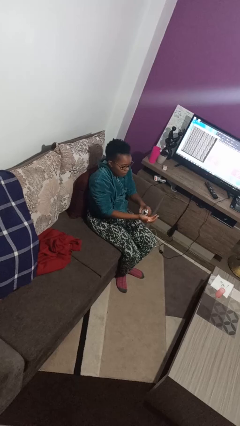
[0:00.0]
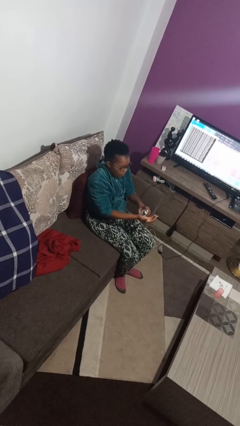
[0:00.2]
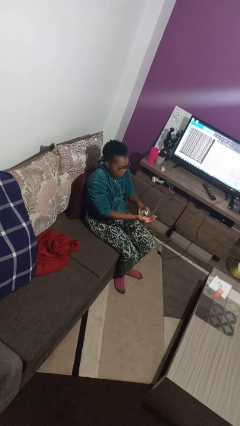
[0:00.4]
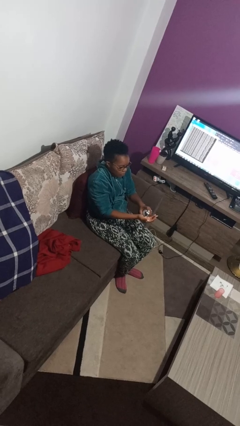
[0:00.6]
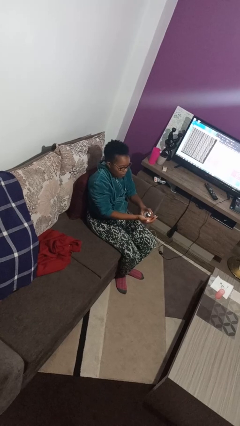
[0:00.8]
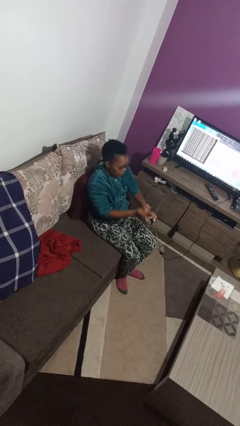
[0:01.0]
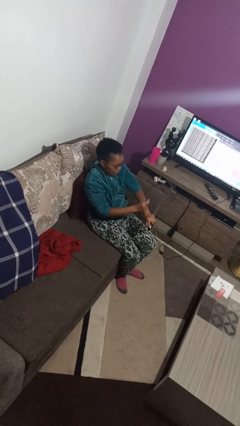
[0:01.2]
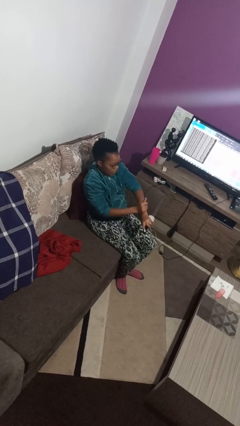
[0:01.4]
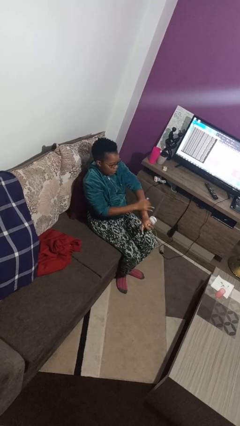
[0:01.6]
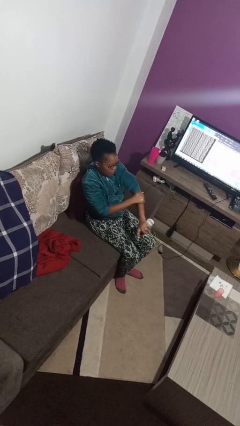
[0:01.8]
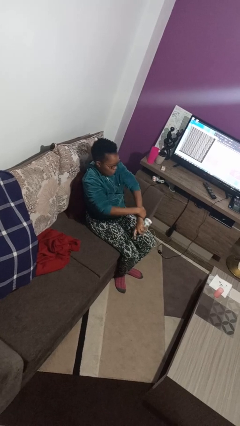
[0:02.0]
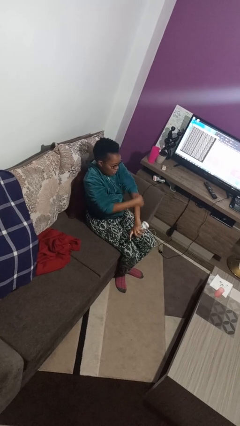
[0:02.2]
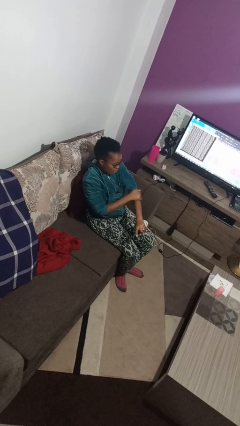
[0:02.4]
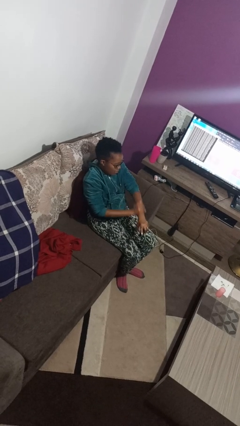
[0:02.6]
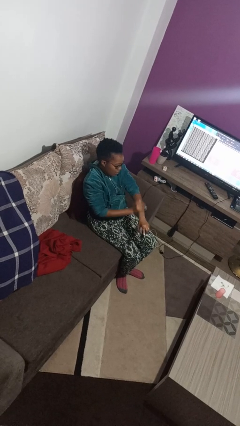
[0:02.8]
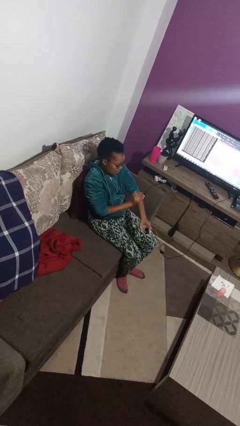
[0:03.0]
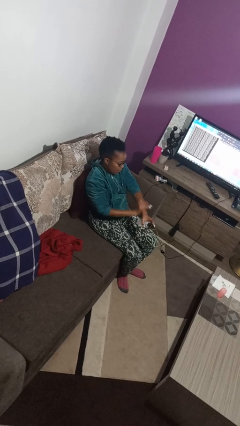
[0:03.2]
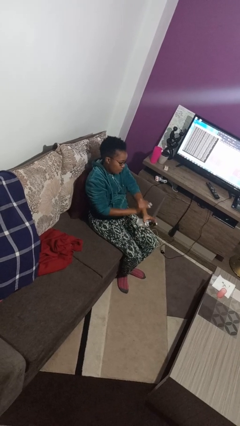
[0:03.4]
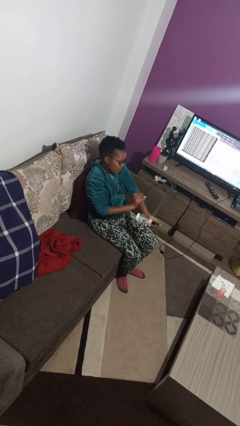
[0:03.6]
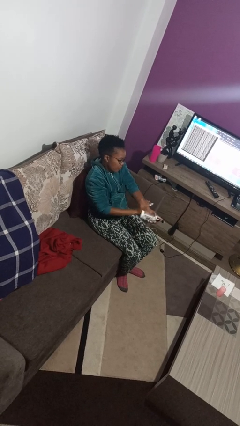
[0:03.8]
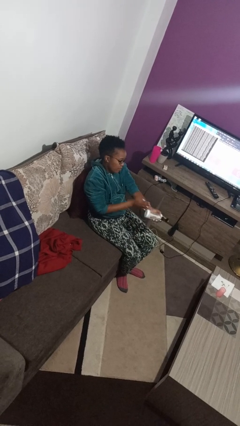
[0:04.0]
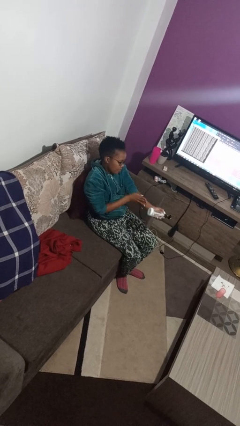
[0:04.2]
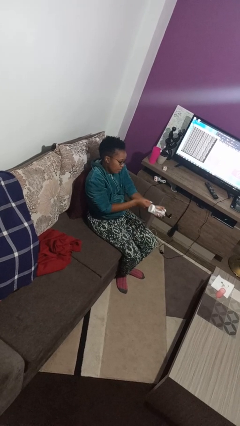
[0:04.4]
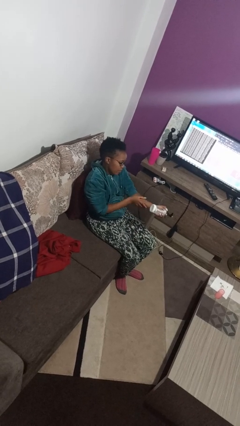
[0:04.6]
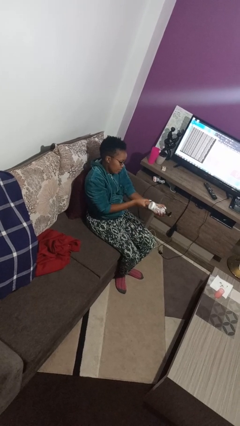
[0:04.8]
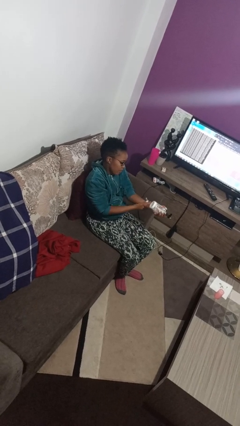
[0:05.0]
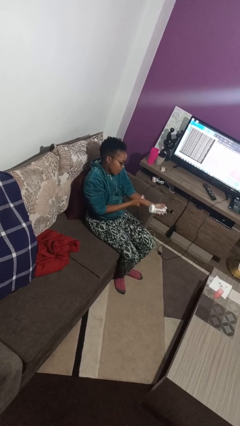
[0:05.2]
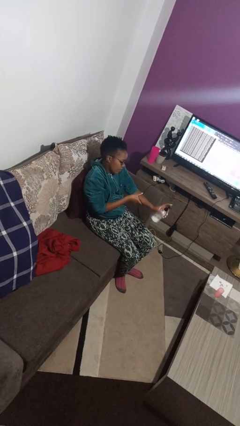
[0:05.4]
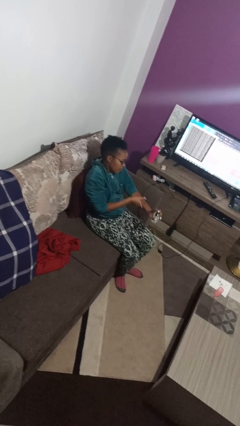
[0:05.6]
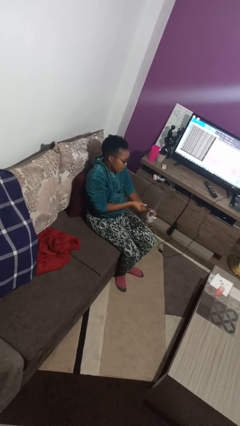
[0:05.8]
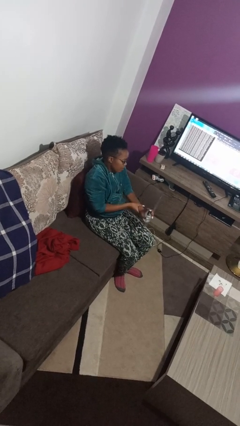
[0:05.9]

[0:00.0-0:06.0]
person applies sunscreen

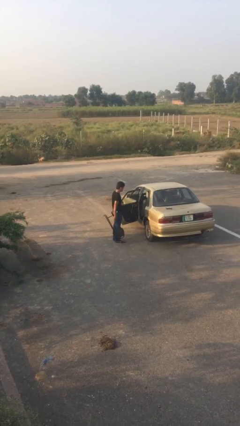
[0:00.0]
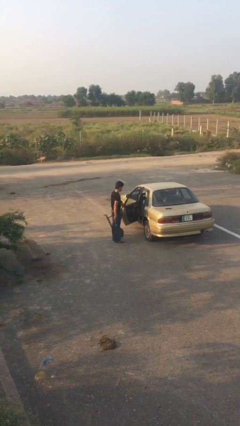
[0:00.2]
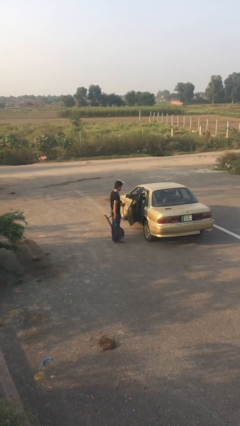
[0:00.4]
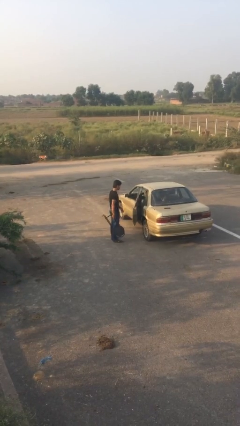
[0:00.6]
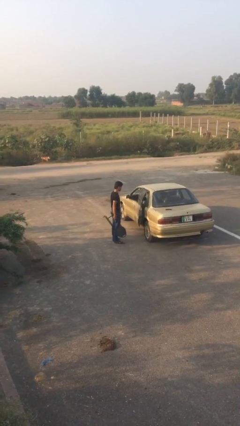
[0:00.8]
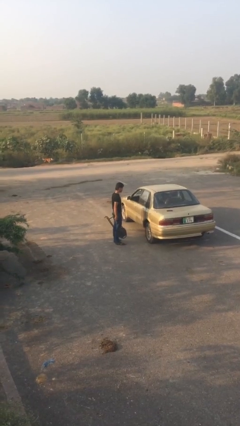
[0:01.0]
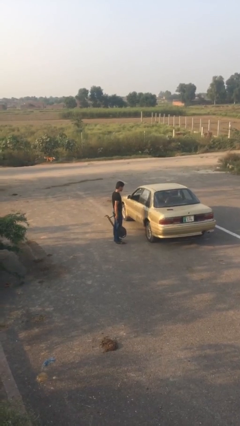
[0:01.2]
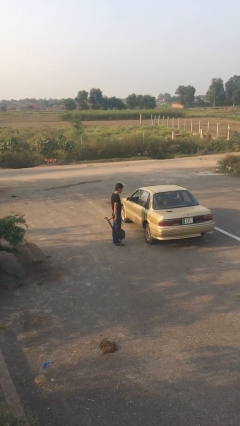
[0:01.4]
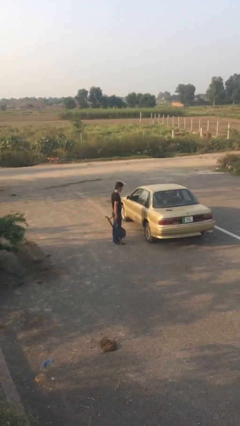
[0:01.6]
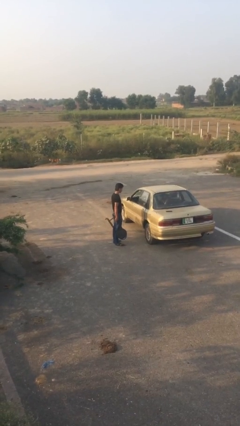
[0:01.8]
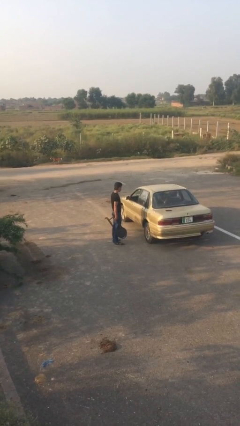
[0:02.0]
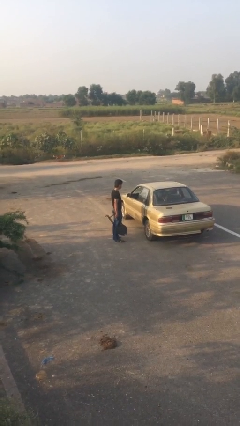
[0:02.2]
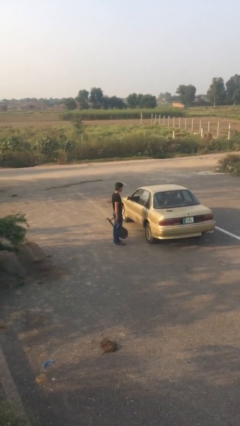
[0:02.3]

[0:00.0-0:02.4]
person closes car door

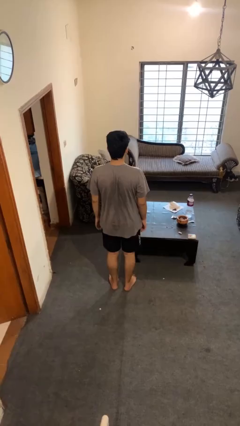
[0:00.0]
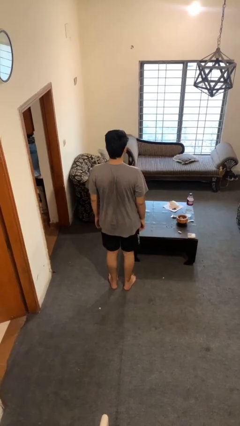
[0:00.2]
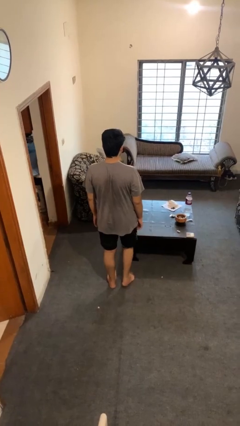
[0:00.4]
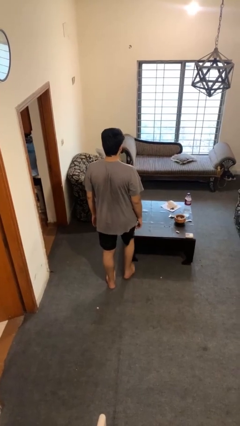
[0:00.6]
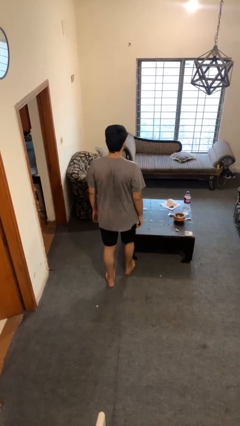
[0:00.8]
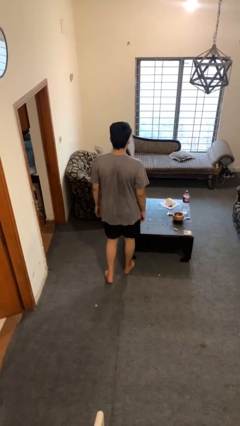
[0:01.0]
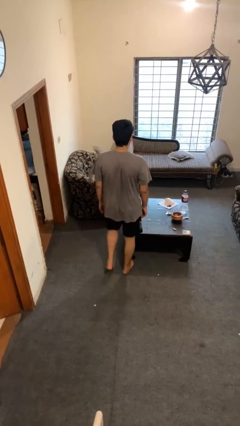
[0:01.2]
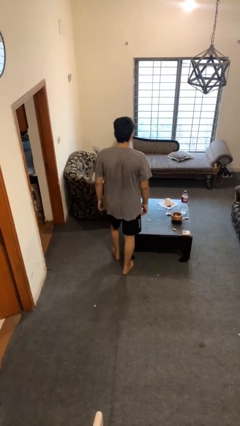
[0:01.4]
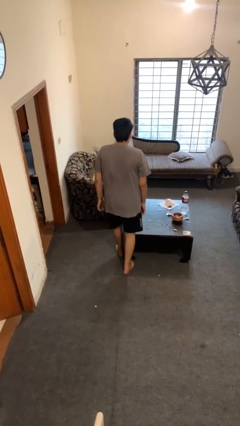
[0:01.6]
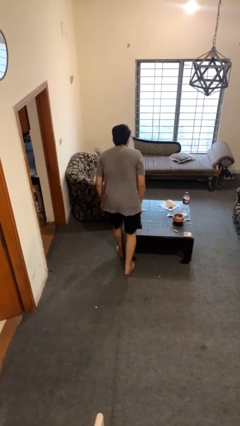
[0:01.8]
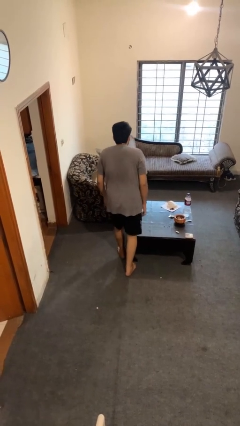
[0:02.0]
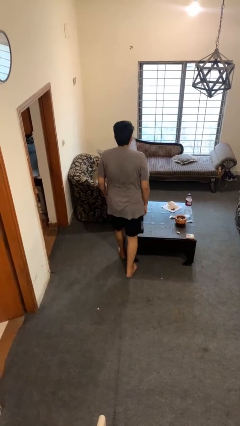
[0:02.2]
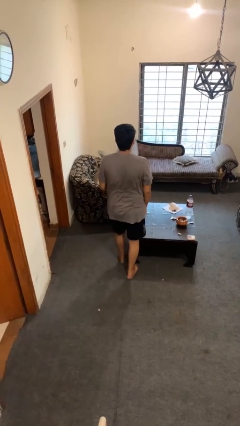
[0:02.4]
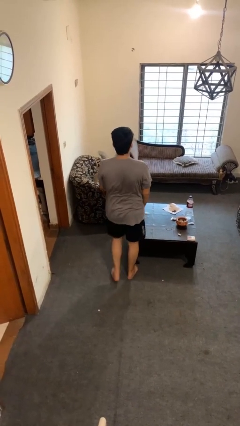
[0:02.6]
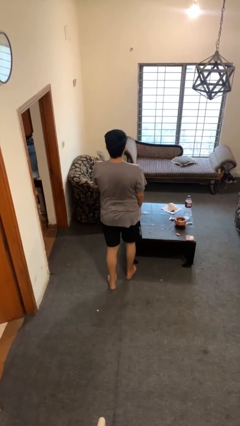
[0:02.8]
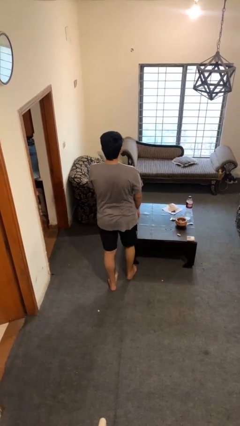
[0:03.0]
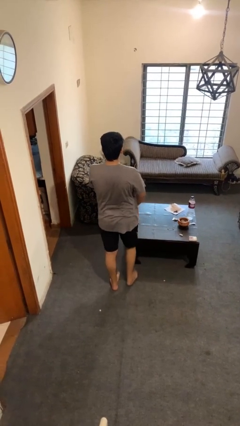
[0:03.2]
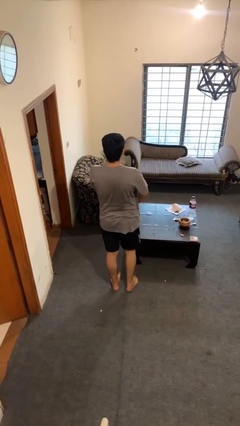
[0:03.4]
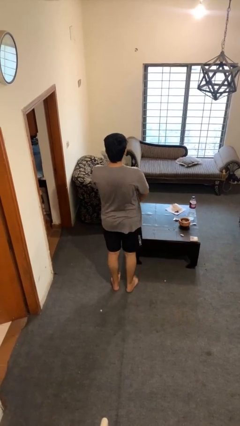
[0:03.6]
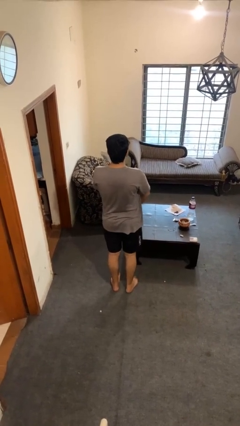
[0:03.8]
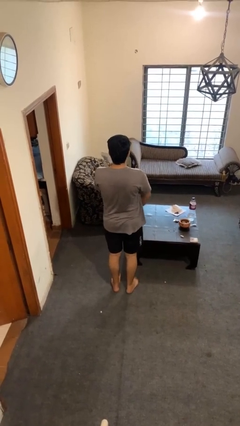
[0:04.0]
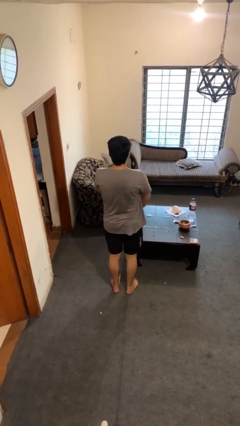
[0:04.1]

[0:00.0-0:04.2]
person bumps into table

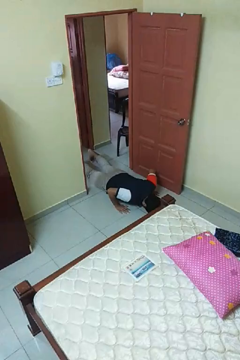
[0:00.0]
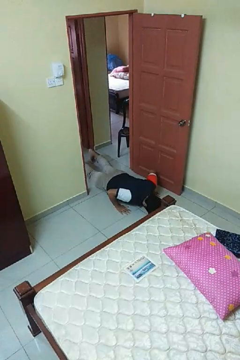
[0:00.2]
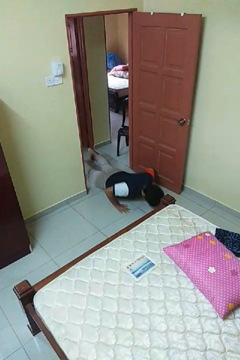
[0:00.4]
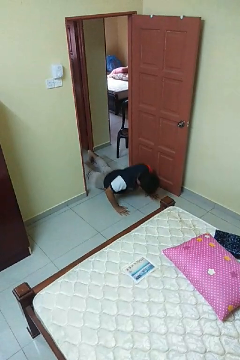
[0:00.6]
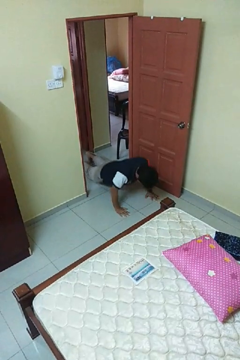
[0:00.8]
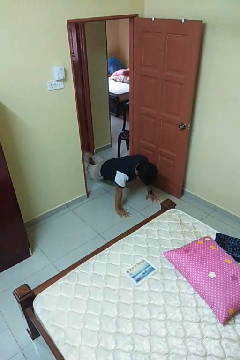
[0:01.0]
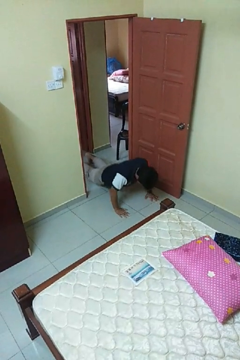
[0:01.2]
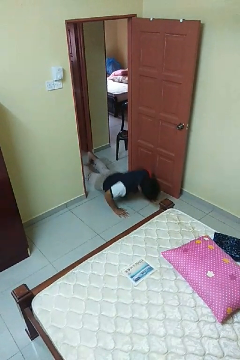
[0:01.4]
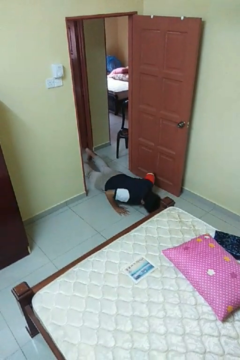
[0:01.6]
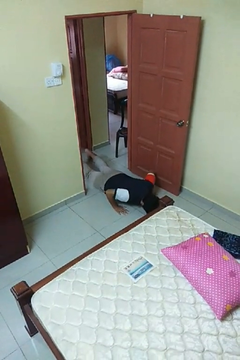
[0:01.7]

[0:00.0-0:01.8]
person exercises with pushup

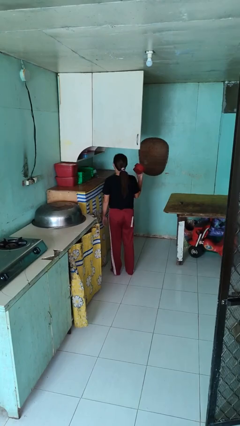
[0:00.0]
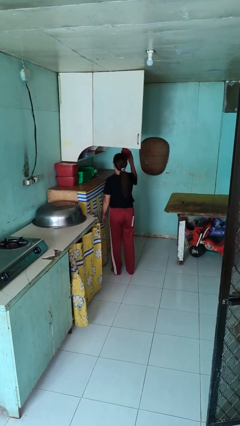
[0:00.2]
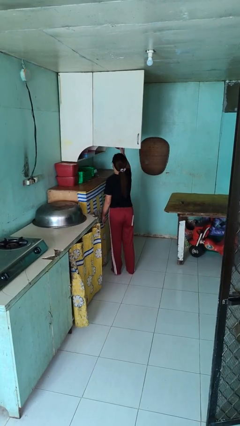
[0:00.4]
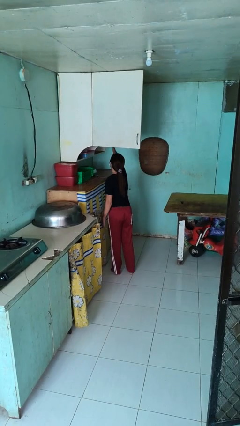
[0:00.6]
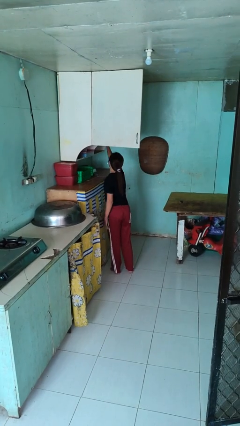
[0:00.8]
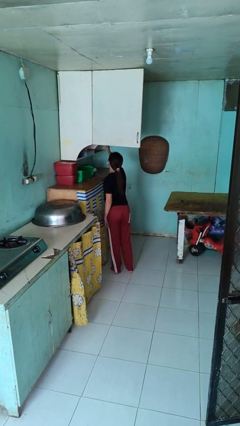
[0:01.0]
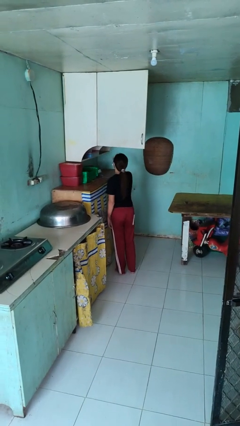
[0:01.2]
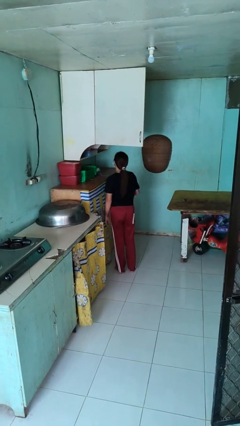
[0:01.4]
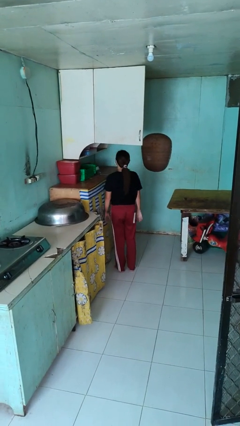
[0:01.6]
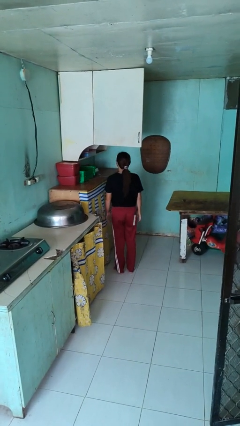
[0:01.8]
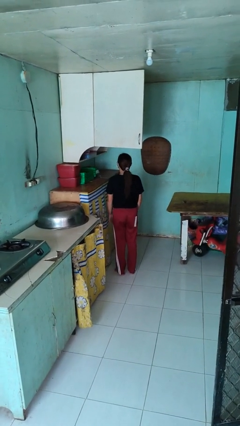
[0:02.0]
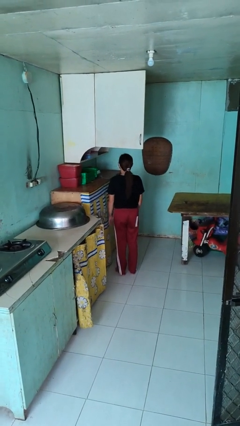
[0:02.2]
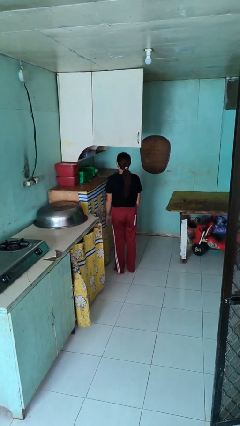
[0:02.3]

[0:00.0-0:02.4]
person puts object in cabinet

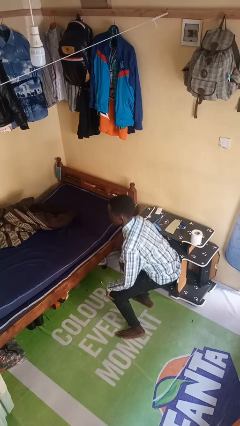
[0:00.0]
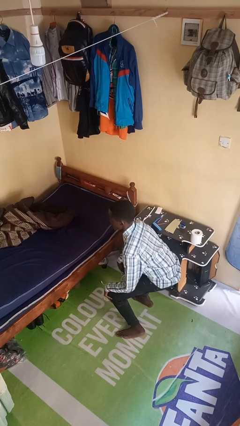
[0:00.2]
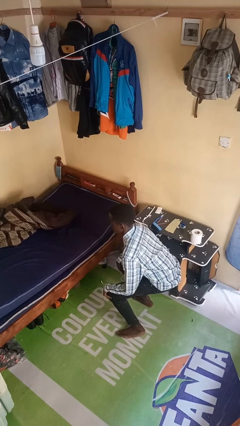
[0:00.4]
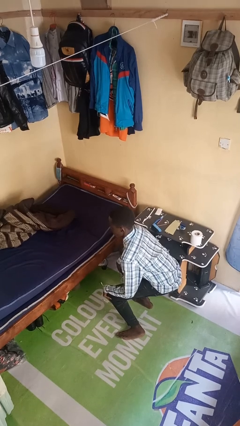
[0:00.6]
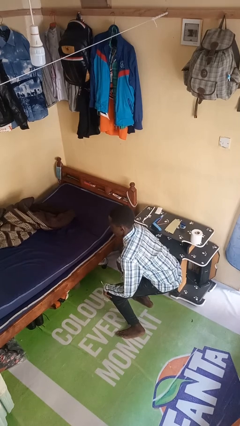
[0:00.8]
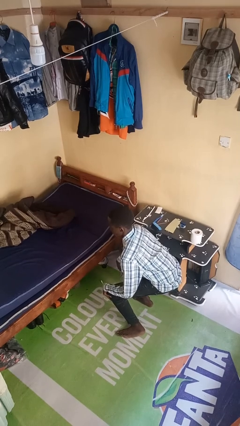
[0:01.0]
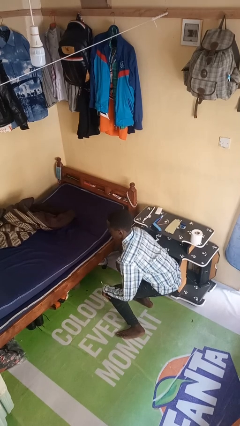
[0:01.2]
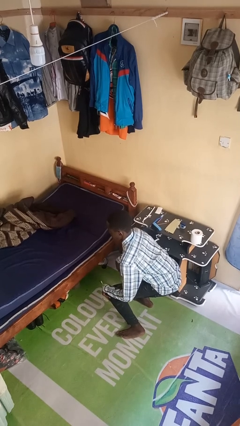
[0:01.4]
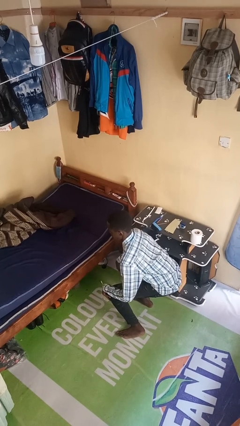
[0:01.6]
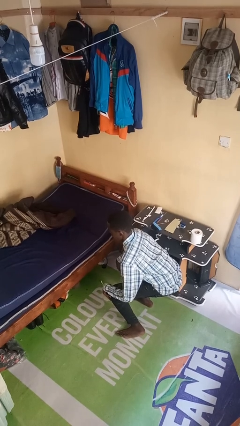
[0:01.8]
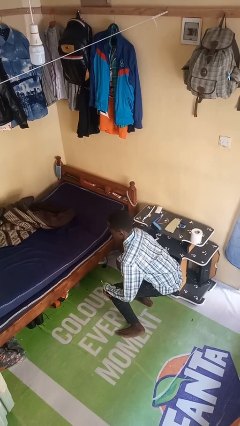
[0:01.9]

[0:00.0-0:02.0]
person squats